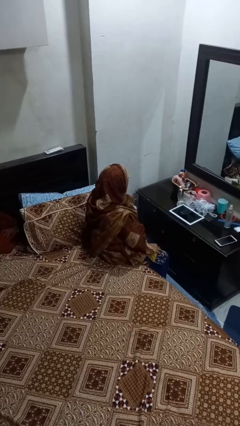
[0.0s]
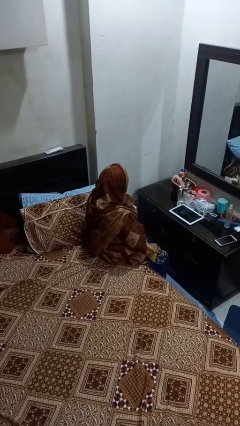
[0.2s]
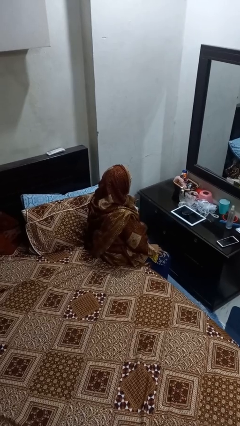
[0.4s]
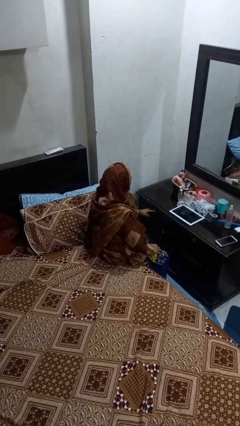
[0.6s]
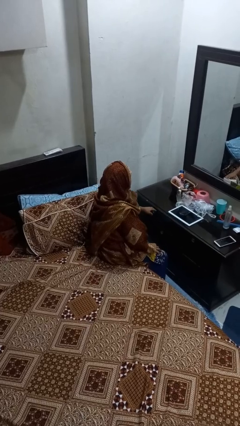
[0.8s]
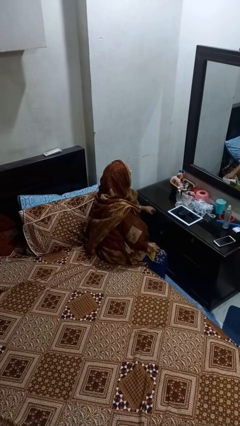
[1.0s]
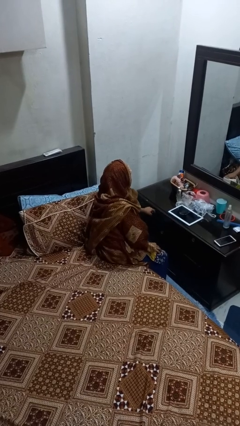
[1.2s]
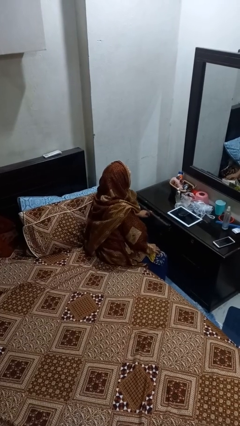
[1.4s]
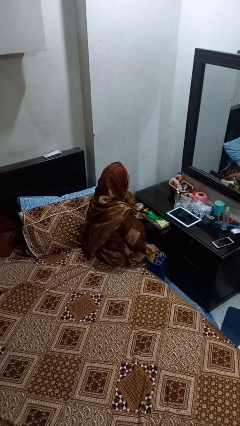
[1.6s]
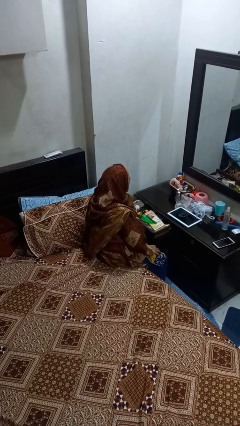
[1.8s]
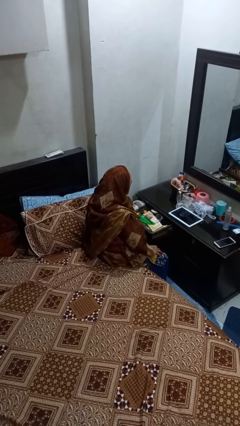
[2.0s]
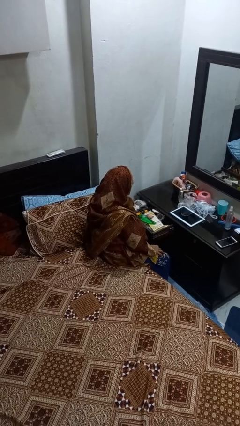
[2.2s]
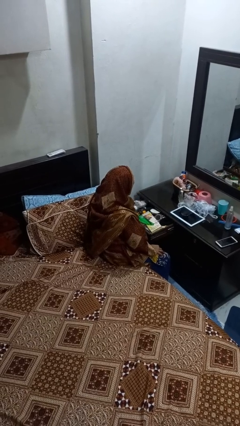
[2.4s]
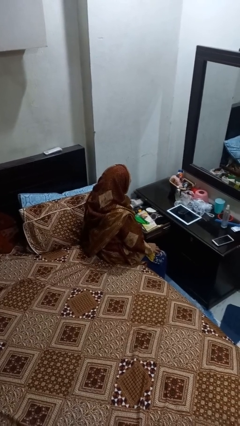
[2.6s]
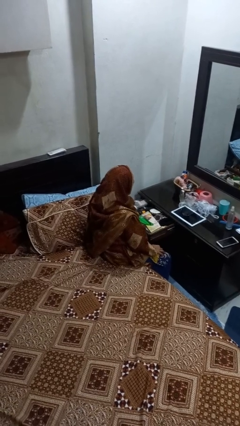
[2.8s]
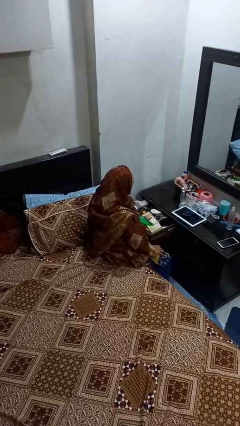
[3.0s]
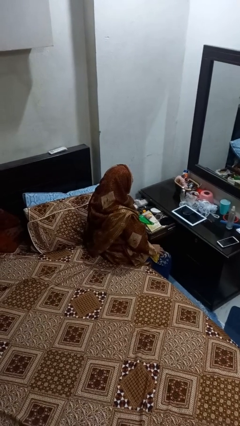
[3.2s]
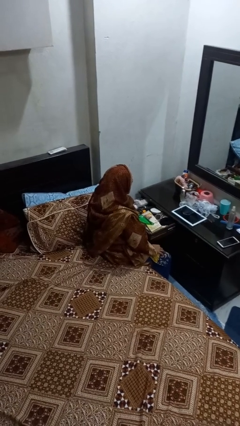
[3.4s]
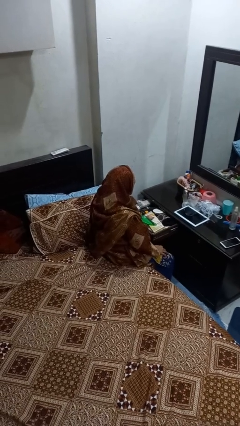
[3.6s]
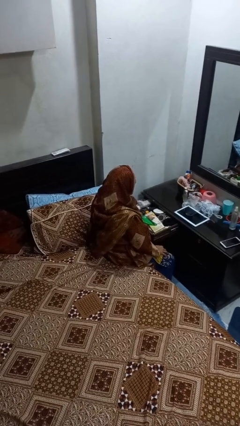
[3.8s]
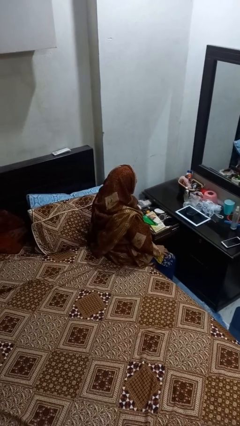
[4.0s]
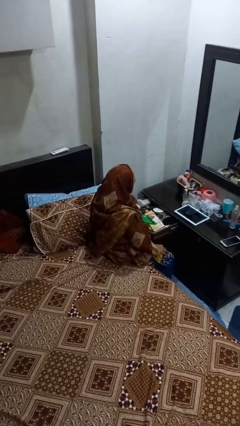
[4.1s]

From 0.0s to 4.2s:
person opens dresser drawer

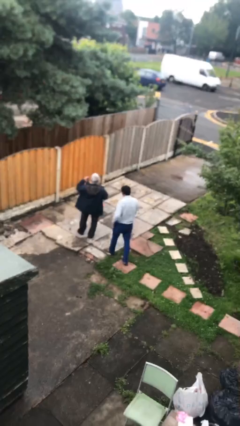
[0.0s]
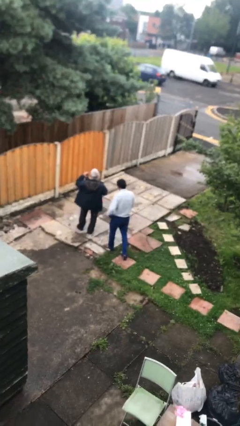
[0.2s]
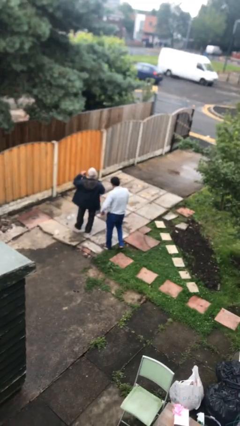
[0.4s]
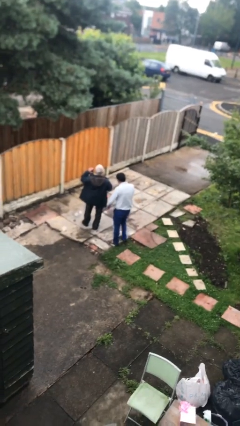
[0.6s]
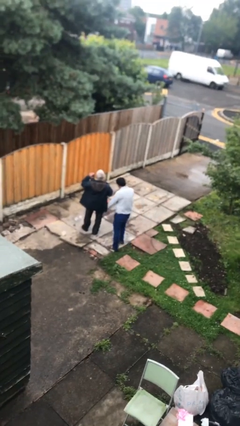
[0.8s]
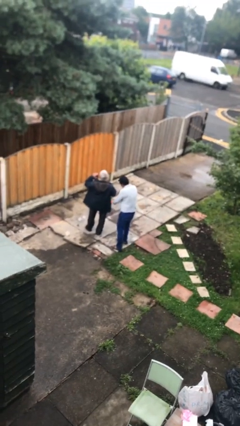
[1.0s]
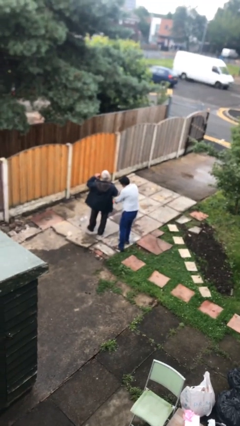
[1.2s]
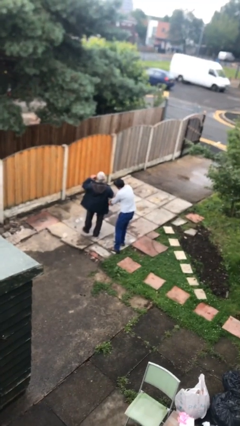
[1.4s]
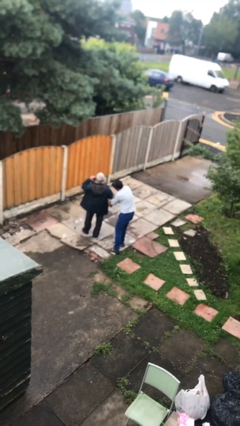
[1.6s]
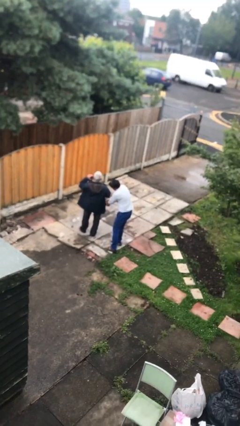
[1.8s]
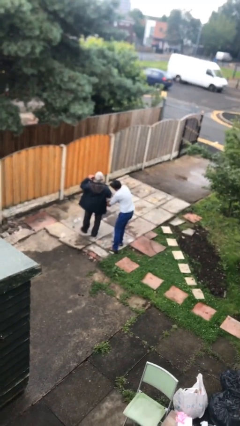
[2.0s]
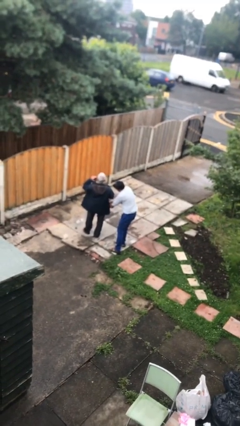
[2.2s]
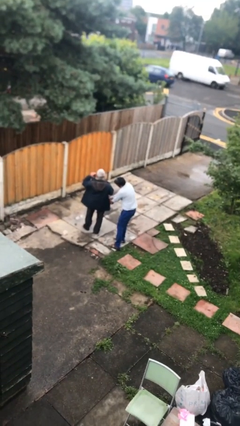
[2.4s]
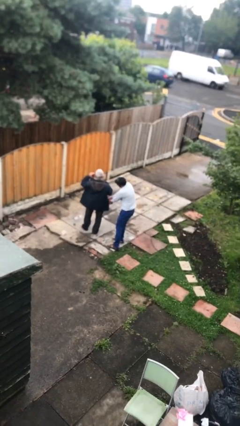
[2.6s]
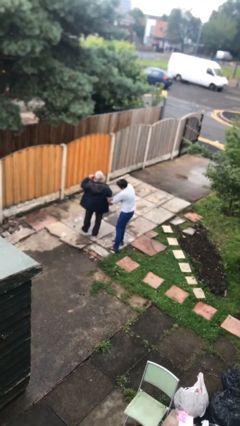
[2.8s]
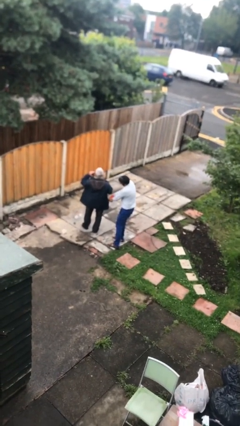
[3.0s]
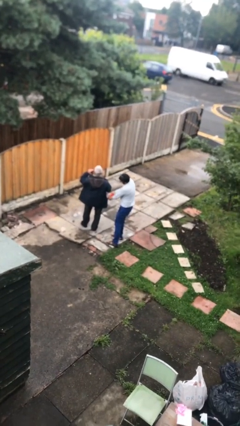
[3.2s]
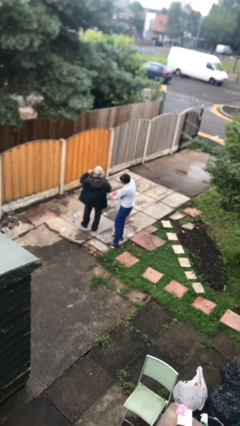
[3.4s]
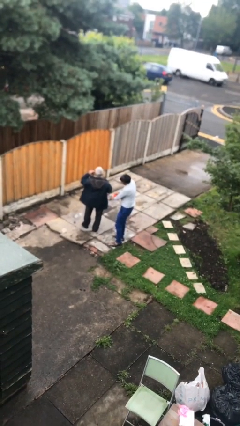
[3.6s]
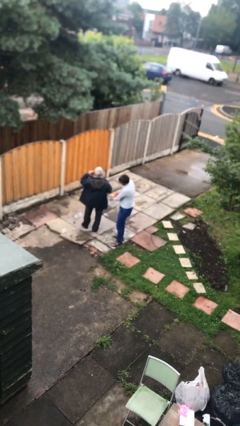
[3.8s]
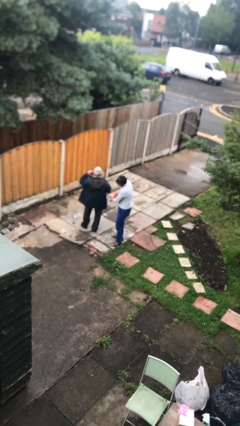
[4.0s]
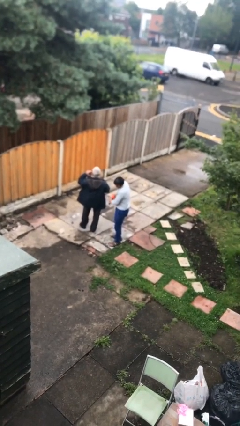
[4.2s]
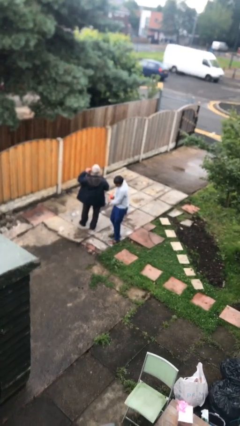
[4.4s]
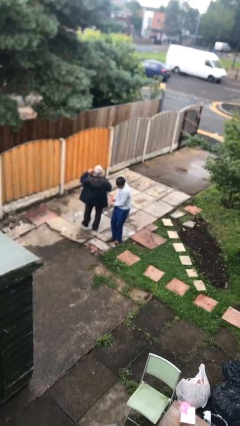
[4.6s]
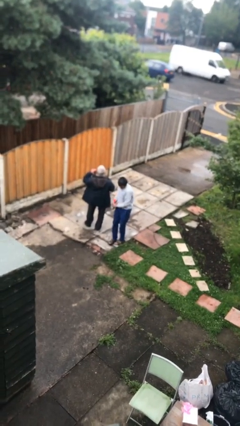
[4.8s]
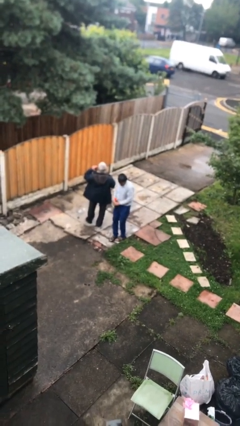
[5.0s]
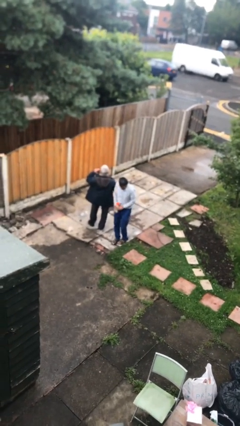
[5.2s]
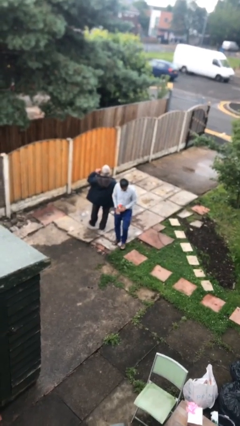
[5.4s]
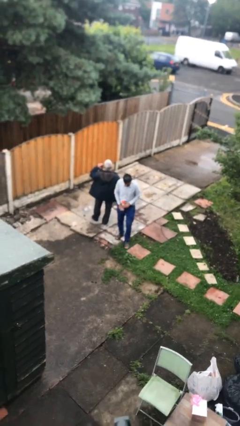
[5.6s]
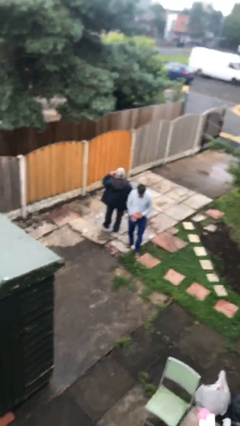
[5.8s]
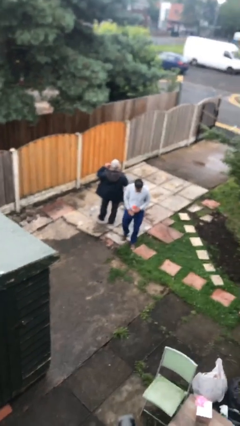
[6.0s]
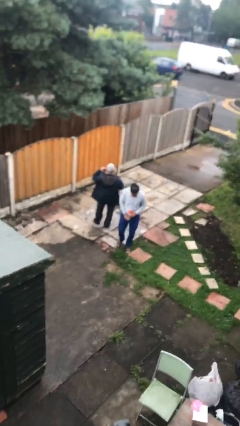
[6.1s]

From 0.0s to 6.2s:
person steals object from person

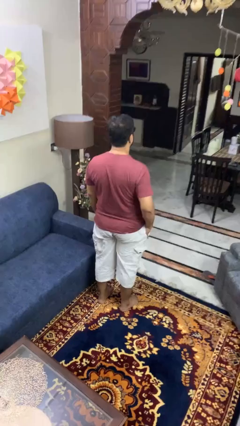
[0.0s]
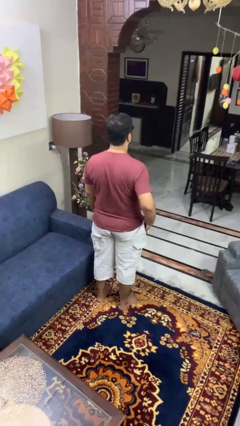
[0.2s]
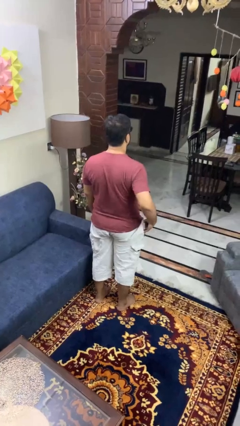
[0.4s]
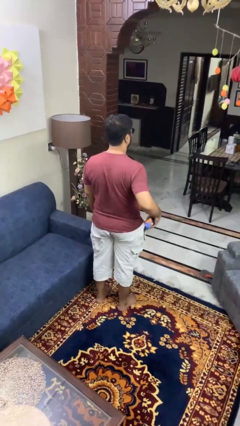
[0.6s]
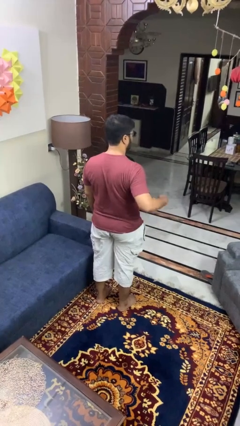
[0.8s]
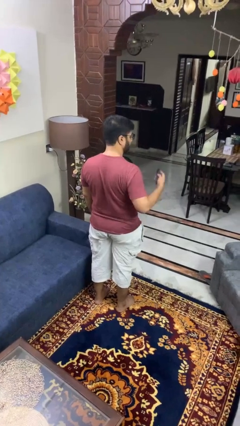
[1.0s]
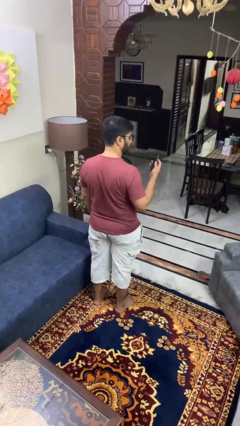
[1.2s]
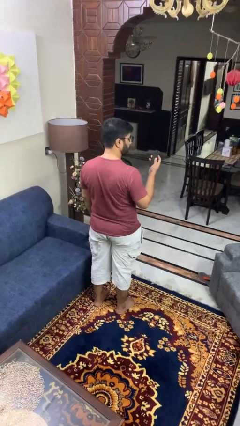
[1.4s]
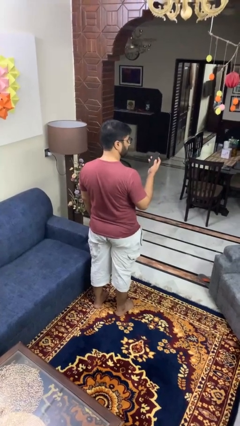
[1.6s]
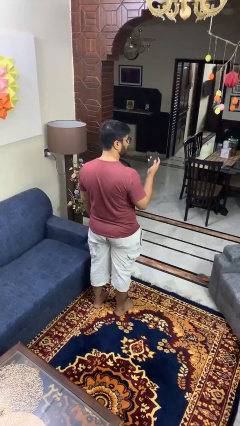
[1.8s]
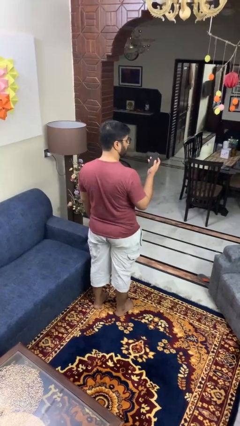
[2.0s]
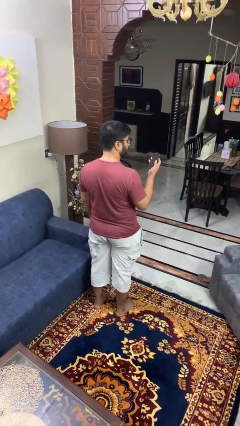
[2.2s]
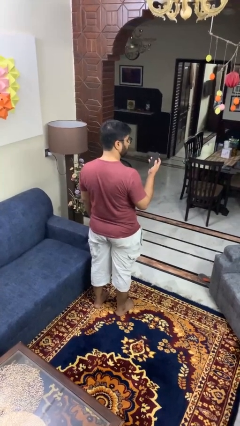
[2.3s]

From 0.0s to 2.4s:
person takes phone from pocket

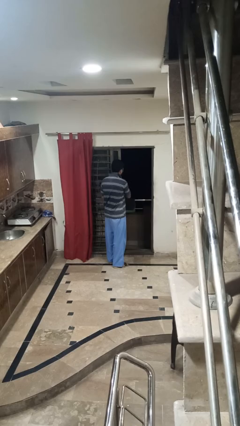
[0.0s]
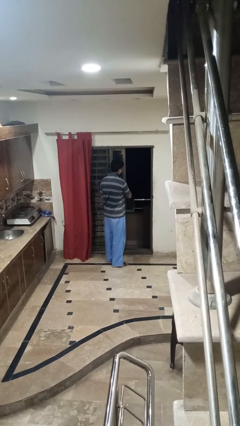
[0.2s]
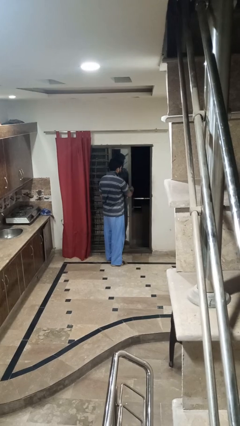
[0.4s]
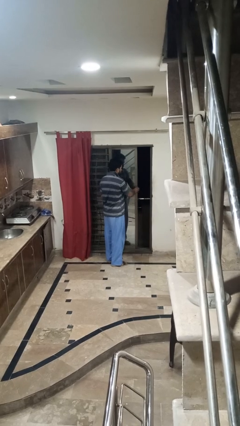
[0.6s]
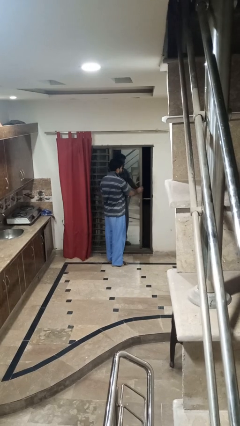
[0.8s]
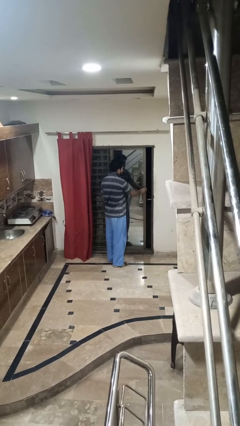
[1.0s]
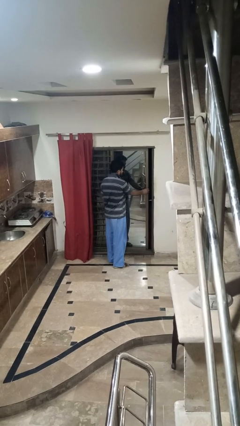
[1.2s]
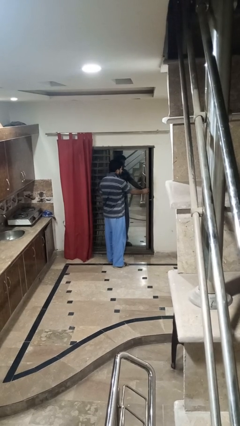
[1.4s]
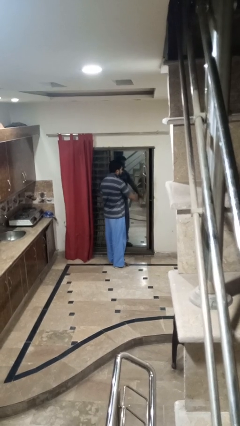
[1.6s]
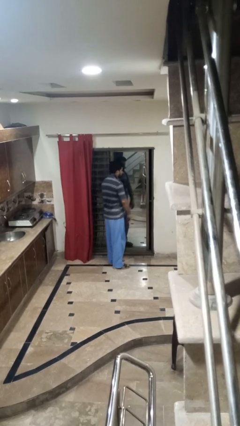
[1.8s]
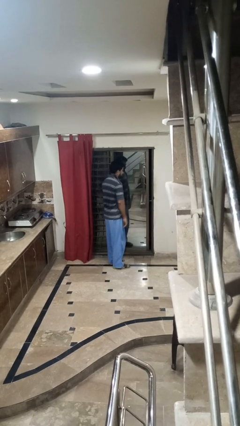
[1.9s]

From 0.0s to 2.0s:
person closes sliding door

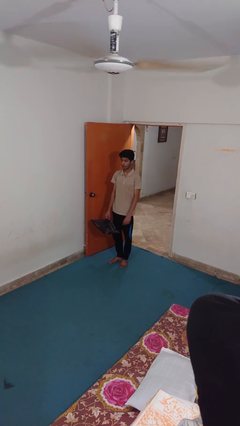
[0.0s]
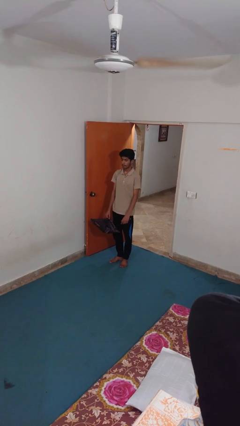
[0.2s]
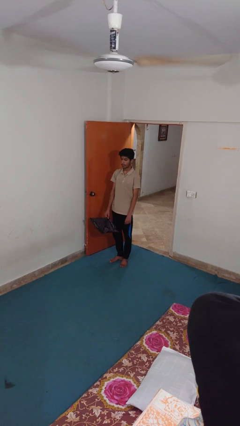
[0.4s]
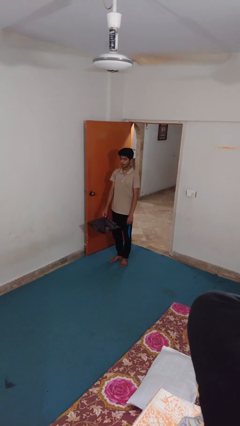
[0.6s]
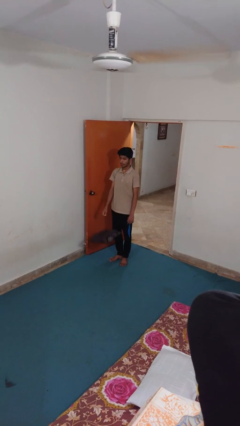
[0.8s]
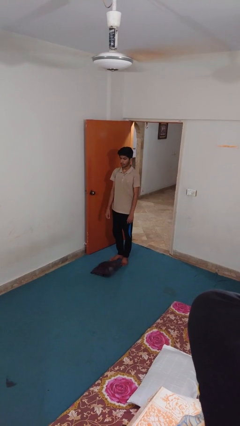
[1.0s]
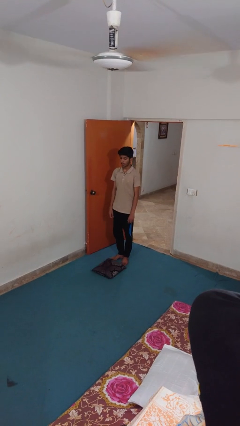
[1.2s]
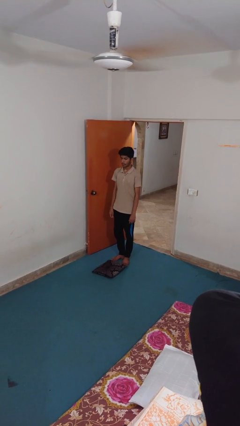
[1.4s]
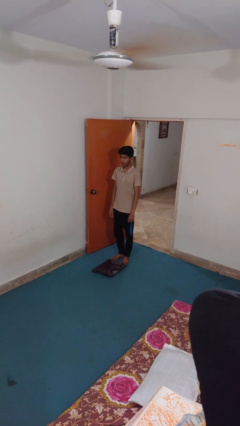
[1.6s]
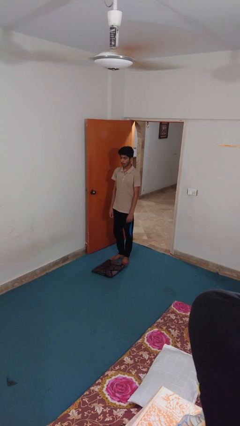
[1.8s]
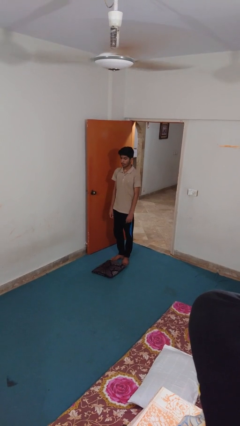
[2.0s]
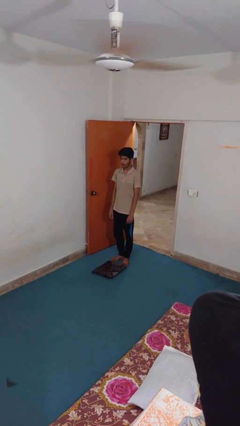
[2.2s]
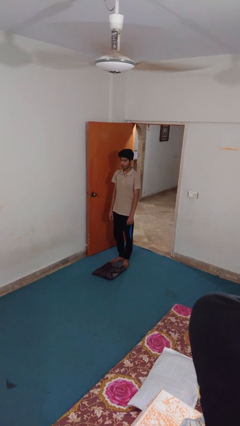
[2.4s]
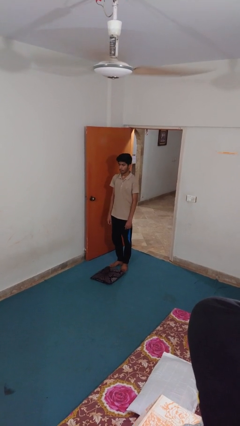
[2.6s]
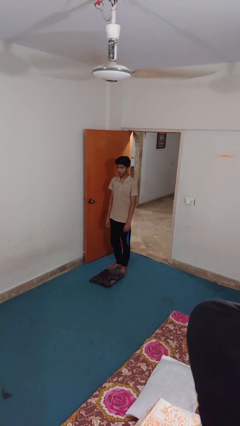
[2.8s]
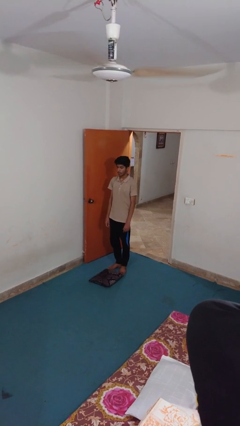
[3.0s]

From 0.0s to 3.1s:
person drops object
